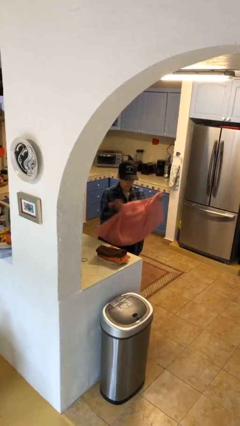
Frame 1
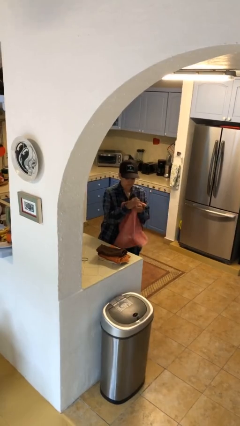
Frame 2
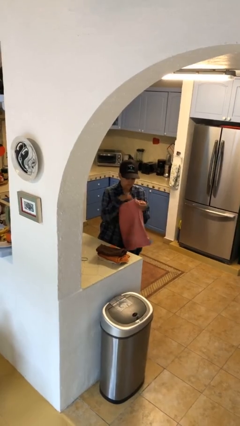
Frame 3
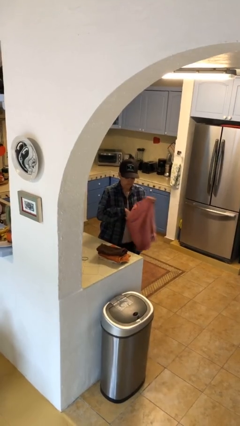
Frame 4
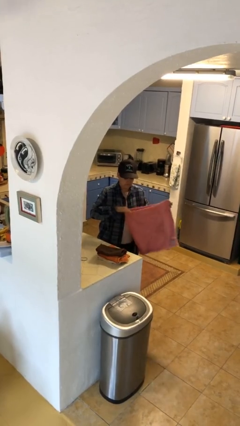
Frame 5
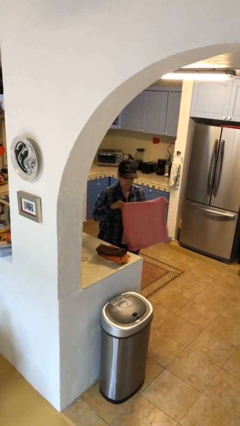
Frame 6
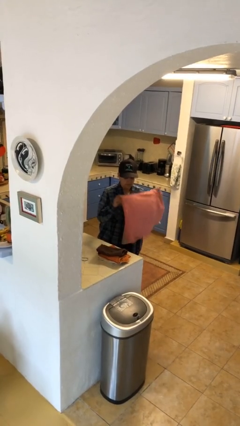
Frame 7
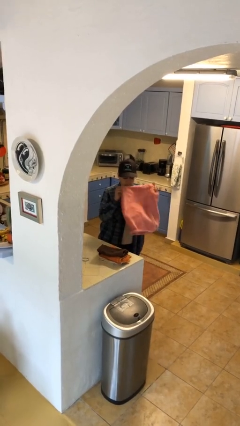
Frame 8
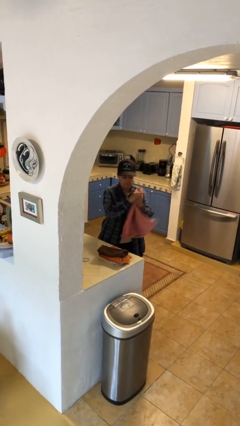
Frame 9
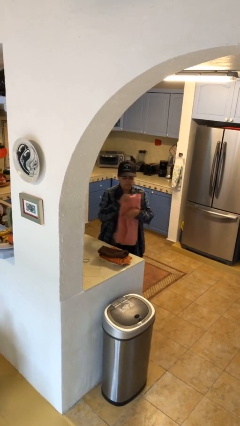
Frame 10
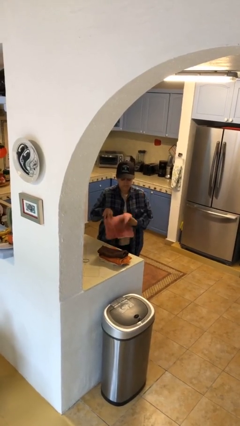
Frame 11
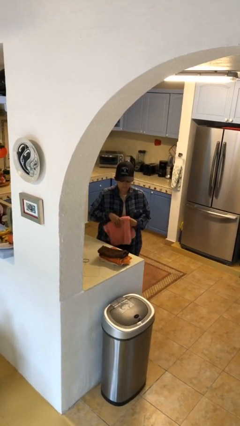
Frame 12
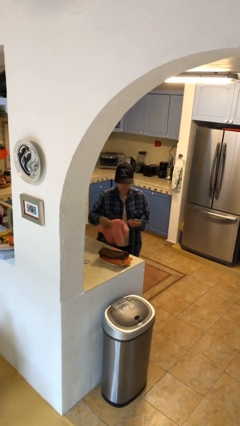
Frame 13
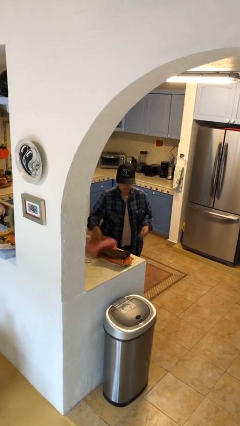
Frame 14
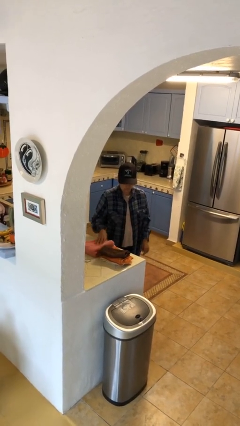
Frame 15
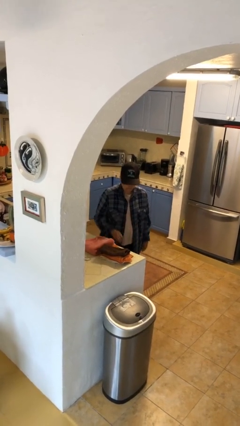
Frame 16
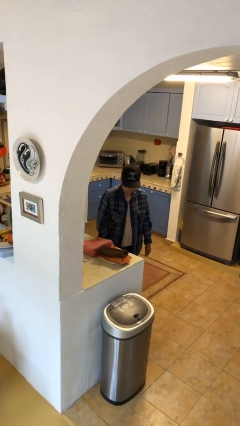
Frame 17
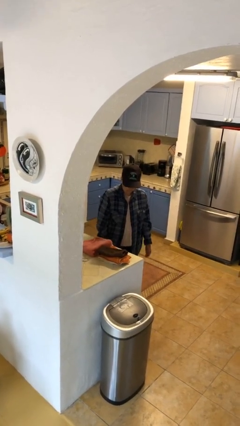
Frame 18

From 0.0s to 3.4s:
person folds towel

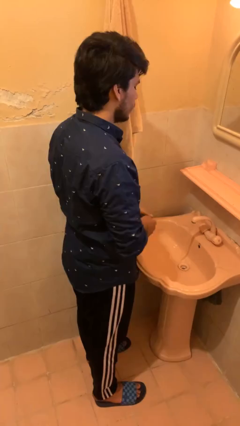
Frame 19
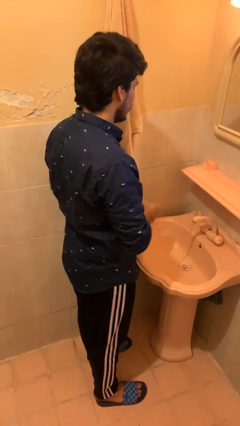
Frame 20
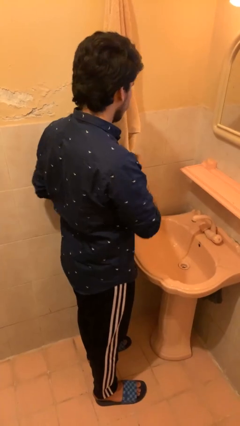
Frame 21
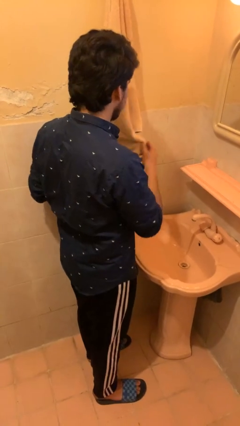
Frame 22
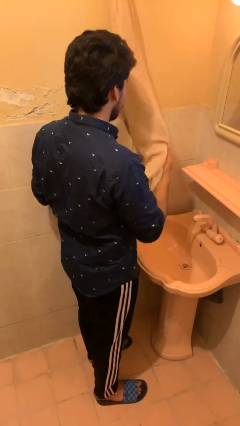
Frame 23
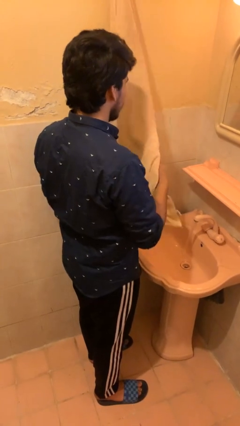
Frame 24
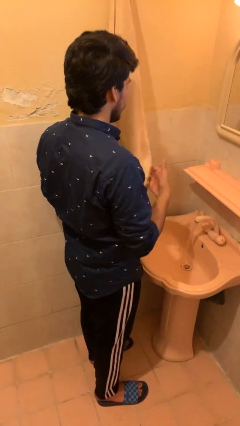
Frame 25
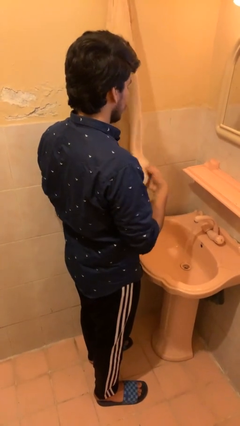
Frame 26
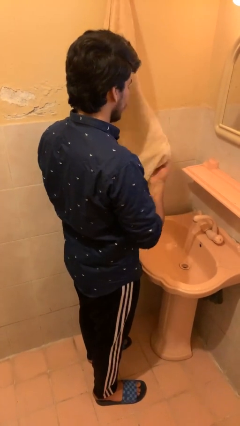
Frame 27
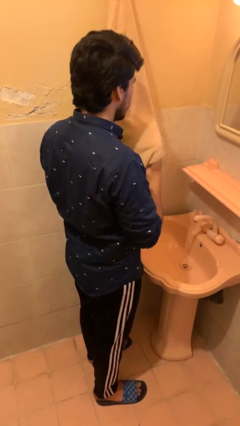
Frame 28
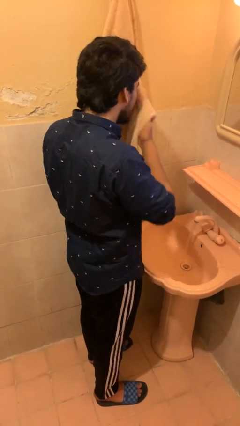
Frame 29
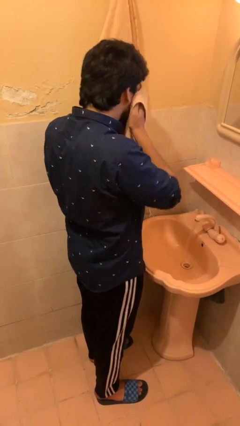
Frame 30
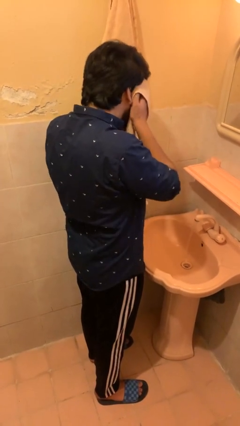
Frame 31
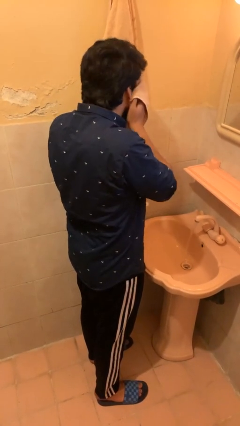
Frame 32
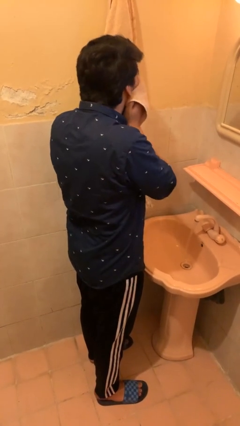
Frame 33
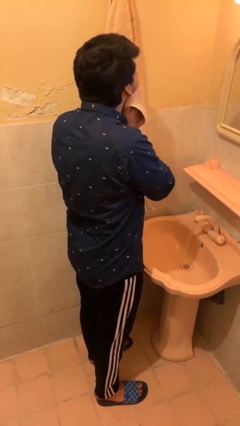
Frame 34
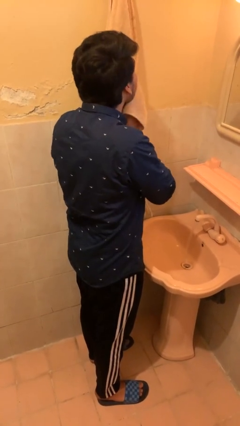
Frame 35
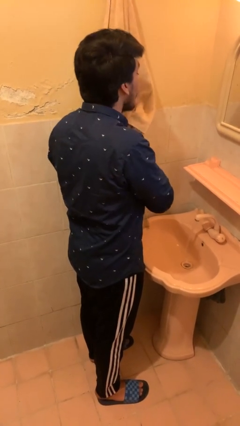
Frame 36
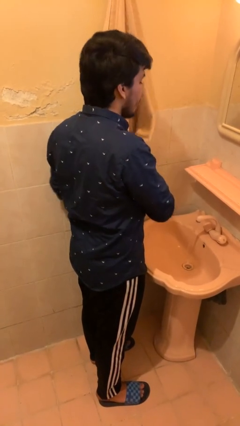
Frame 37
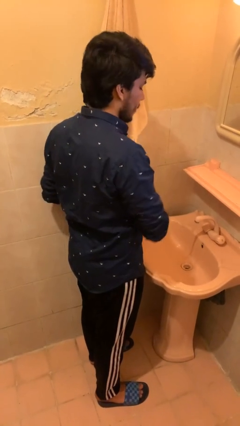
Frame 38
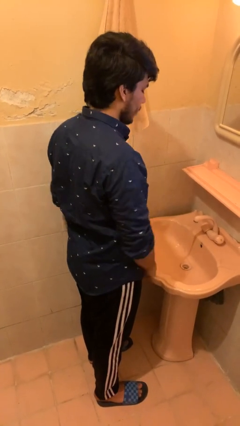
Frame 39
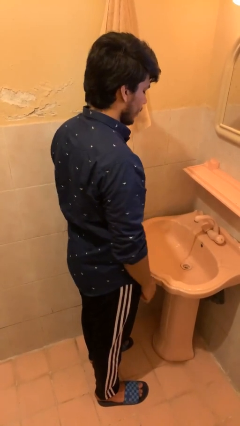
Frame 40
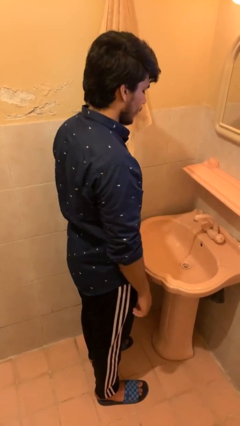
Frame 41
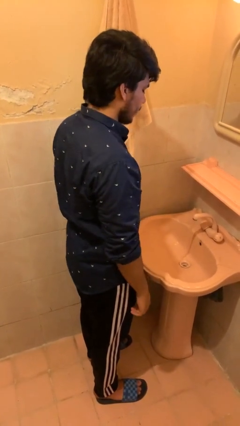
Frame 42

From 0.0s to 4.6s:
person dries face with towel

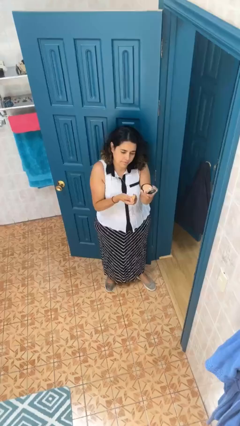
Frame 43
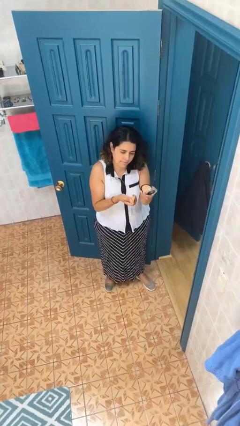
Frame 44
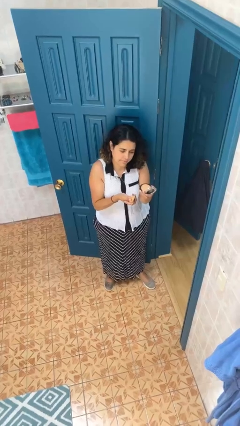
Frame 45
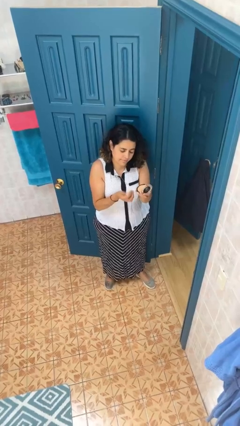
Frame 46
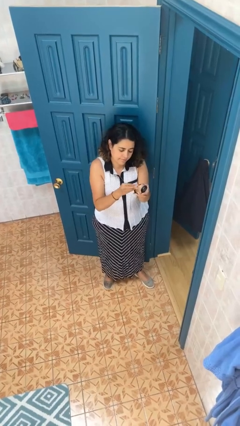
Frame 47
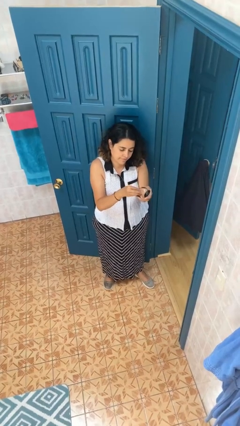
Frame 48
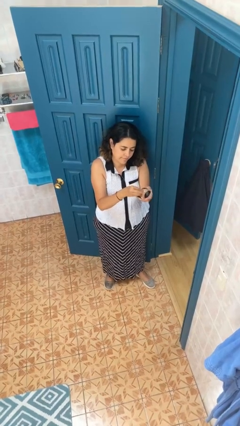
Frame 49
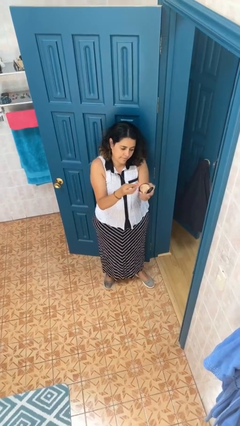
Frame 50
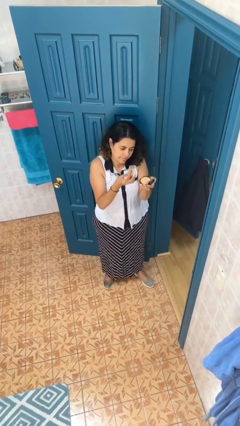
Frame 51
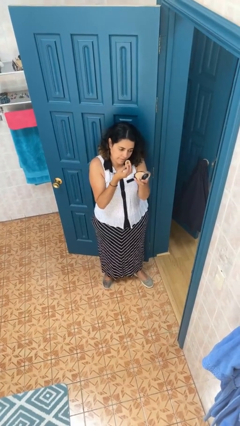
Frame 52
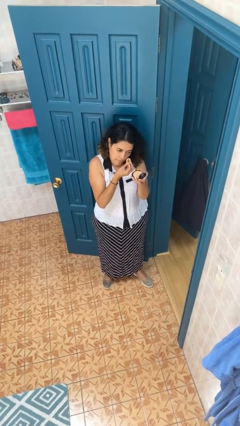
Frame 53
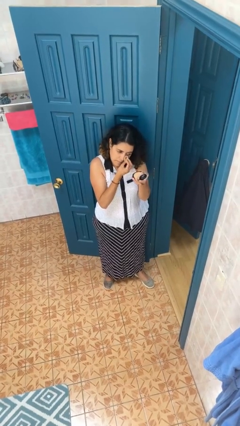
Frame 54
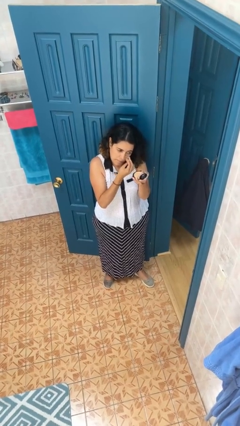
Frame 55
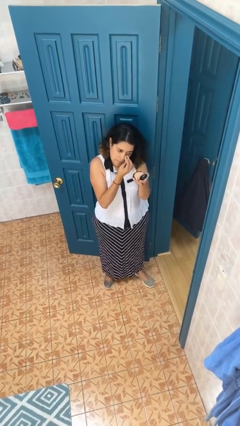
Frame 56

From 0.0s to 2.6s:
person applies foundation makeup

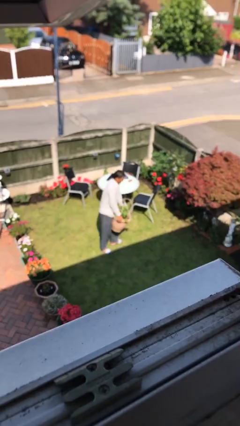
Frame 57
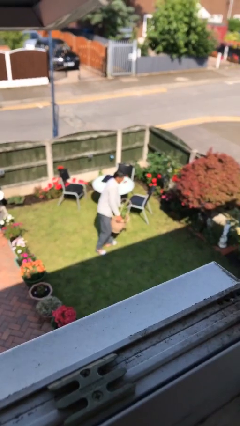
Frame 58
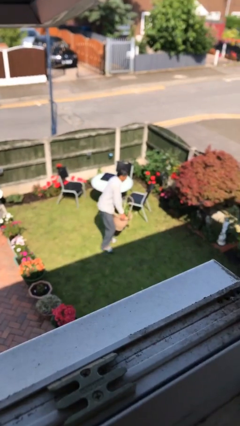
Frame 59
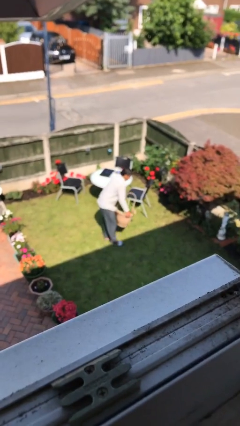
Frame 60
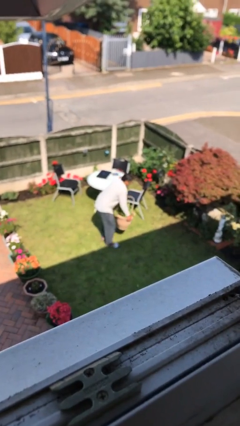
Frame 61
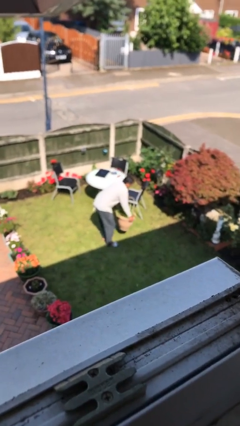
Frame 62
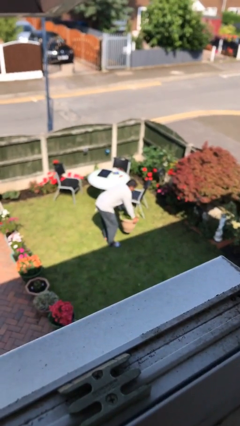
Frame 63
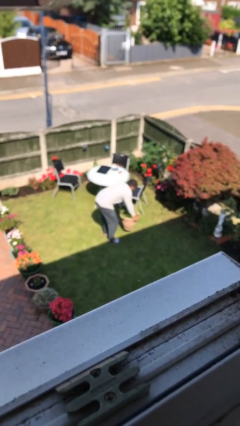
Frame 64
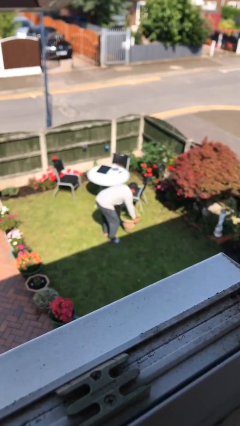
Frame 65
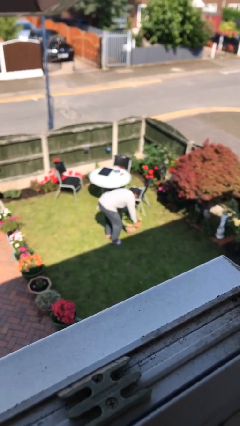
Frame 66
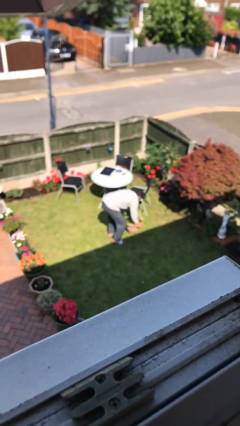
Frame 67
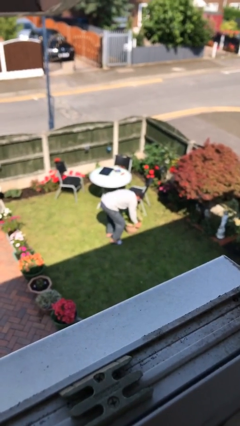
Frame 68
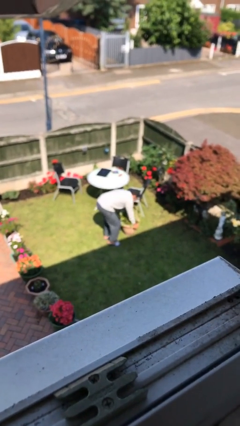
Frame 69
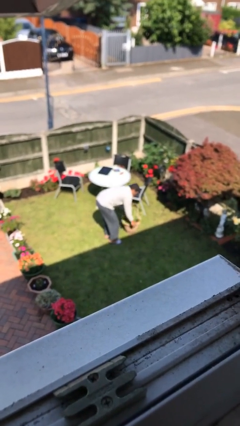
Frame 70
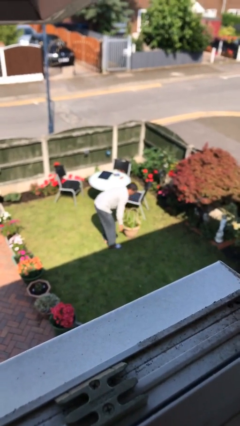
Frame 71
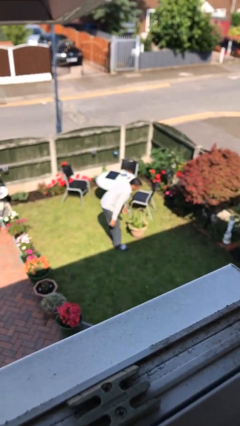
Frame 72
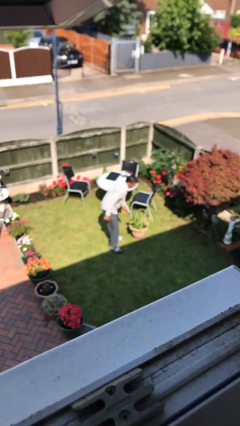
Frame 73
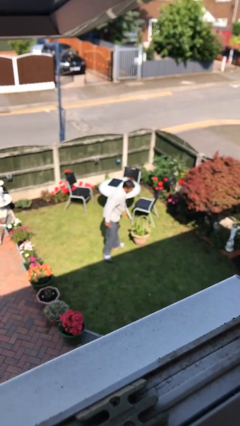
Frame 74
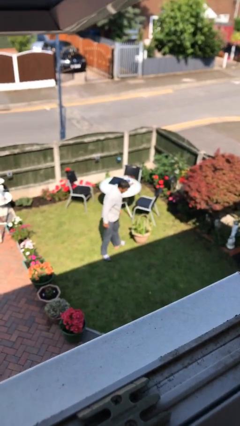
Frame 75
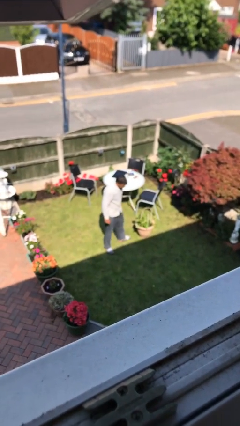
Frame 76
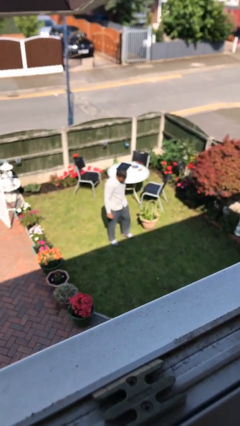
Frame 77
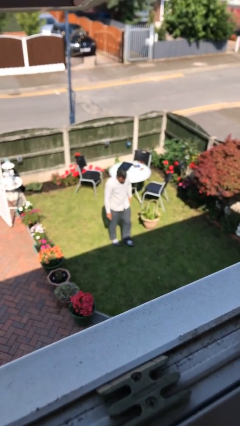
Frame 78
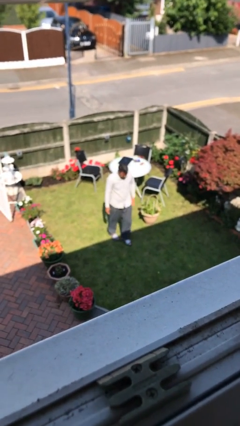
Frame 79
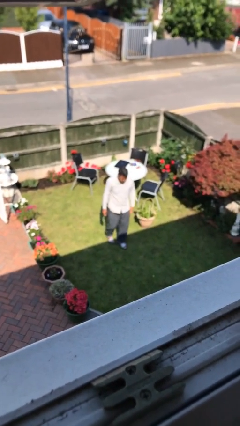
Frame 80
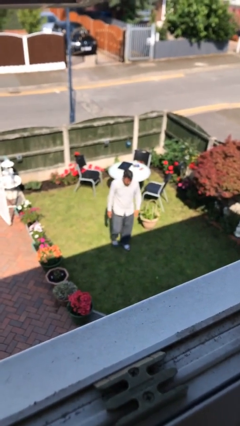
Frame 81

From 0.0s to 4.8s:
person puts down object on floor

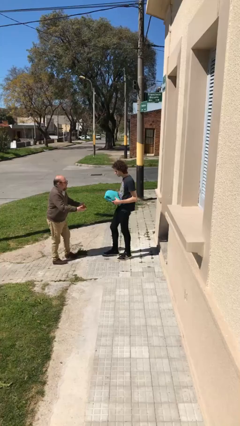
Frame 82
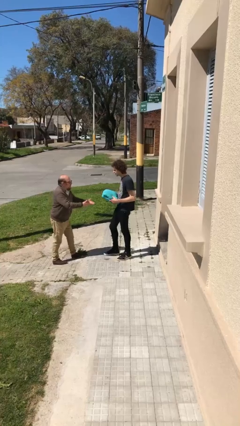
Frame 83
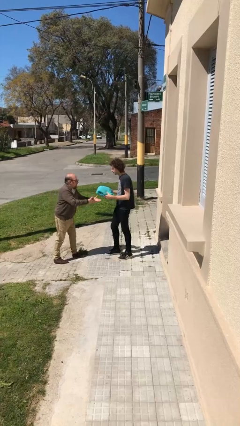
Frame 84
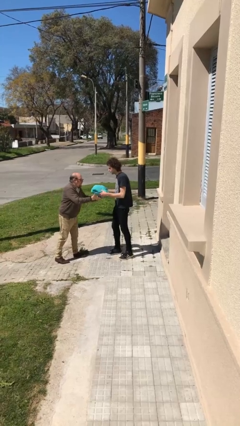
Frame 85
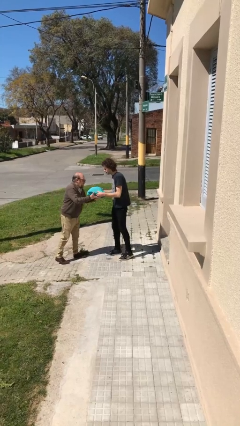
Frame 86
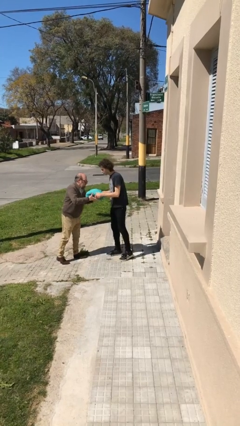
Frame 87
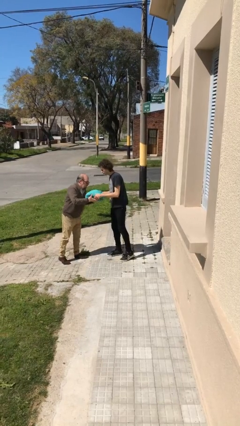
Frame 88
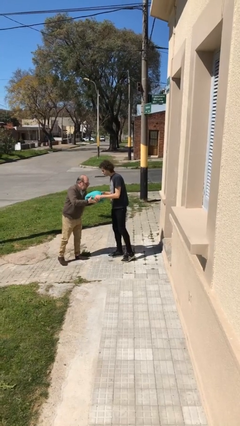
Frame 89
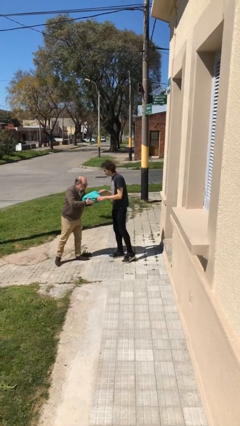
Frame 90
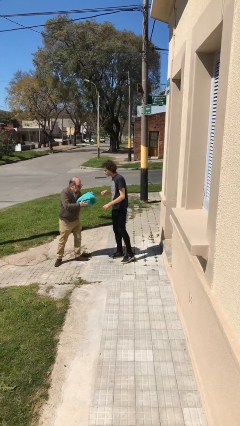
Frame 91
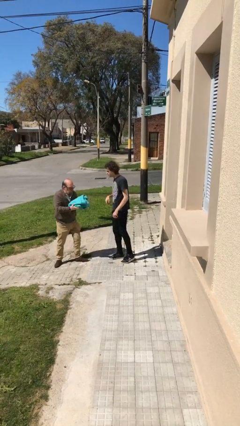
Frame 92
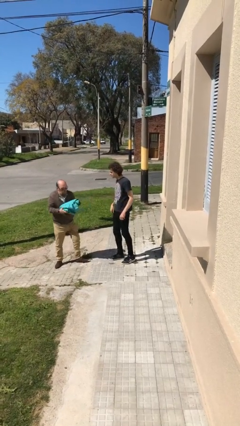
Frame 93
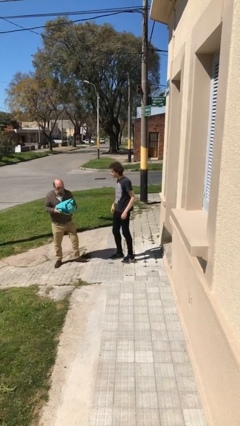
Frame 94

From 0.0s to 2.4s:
person transfers object to person
